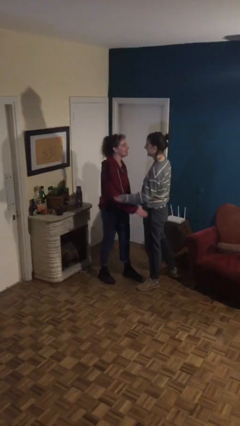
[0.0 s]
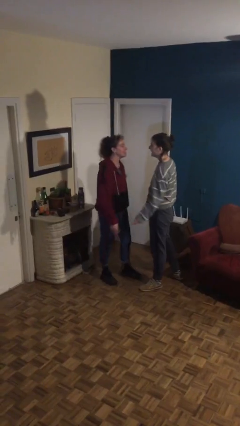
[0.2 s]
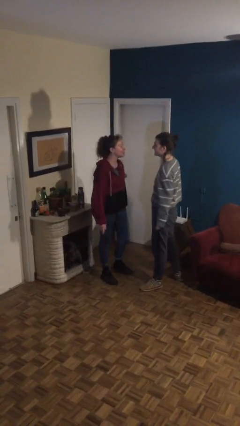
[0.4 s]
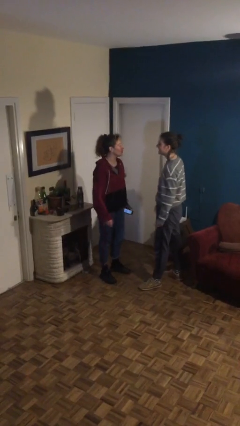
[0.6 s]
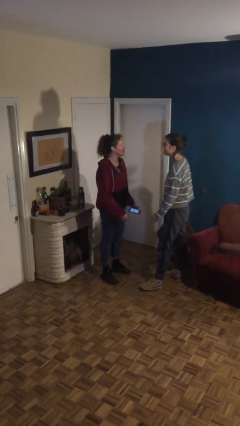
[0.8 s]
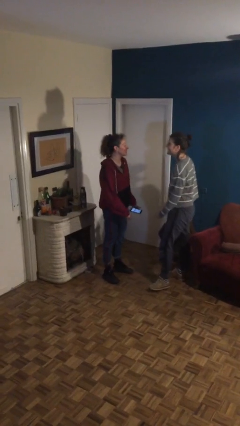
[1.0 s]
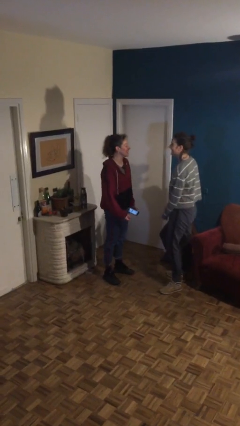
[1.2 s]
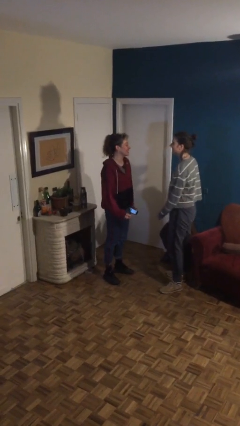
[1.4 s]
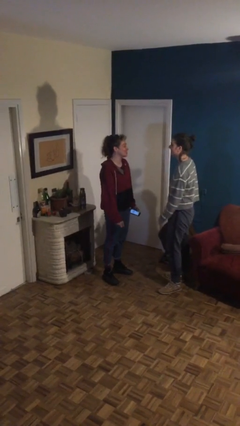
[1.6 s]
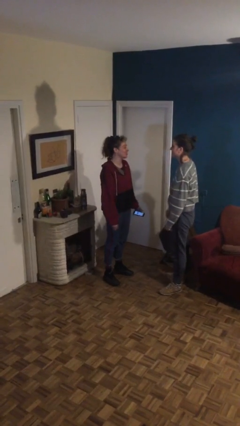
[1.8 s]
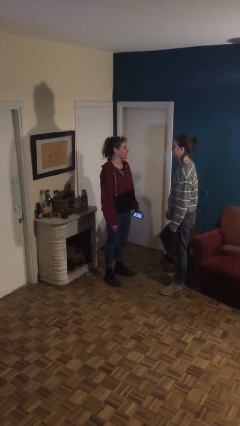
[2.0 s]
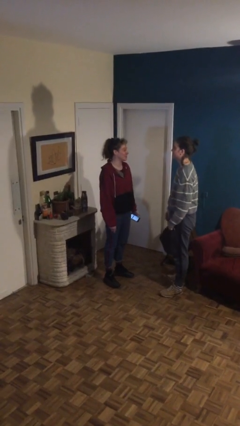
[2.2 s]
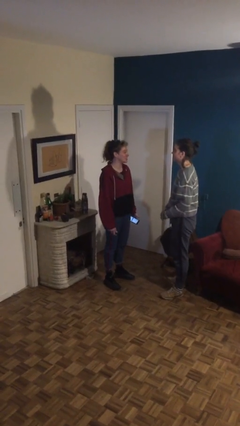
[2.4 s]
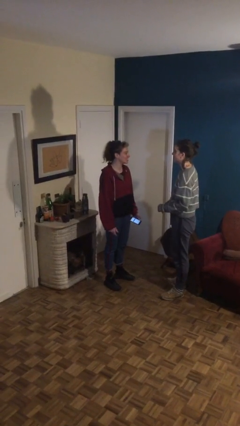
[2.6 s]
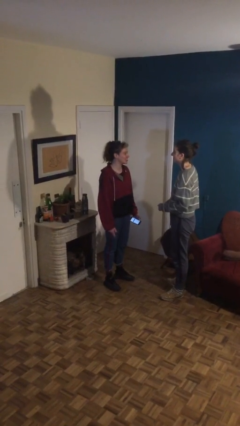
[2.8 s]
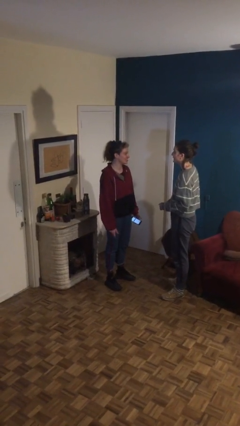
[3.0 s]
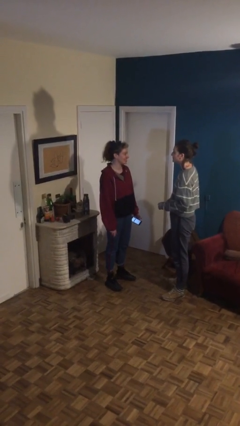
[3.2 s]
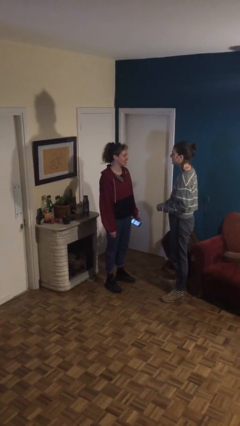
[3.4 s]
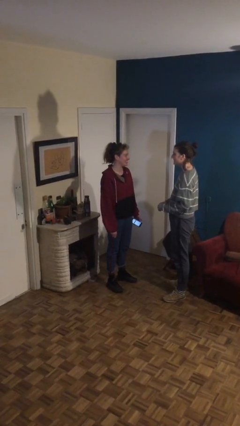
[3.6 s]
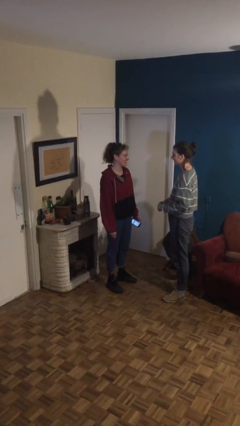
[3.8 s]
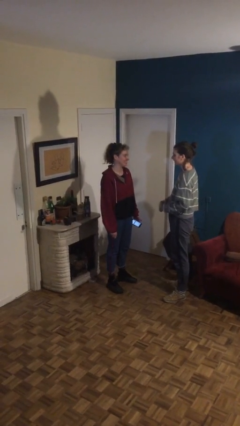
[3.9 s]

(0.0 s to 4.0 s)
person talks to person

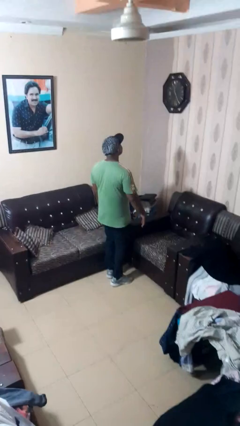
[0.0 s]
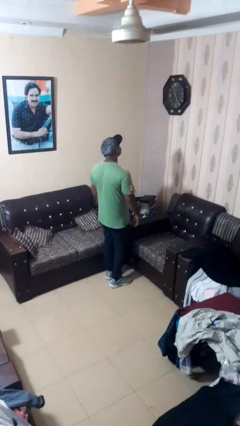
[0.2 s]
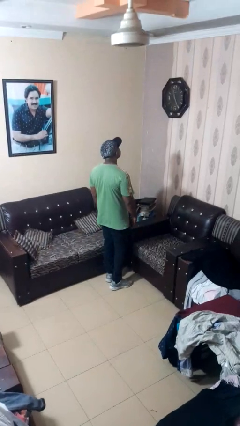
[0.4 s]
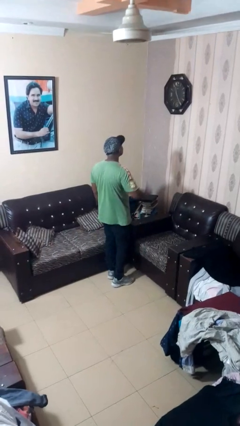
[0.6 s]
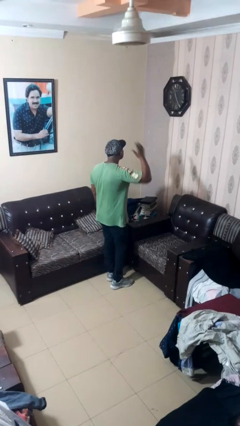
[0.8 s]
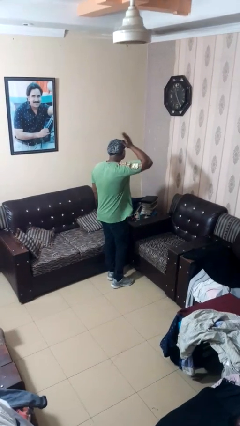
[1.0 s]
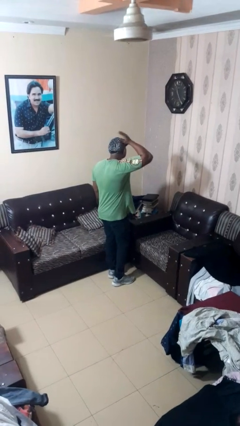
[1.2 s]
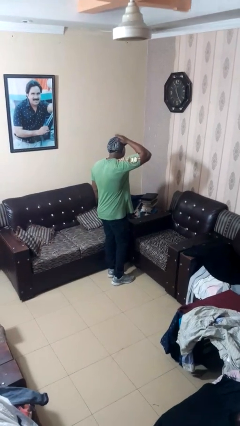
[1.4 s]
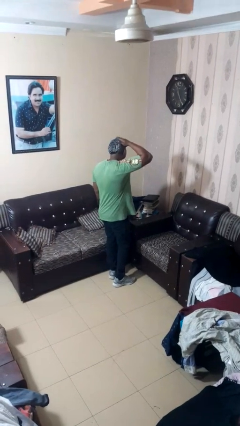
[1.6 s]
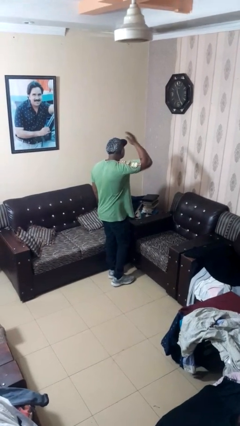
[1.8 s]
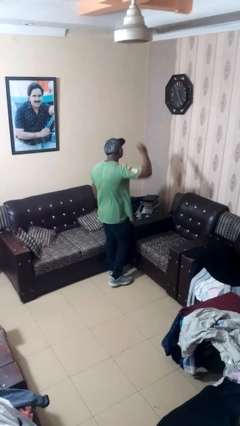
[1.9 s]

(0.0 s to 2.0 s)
person pats head

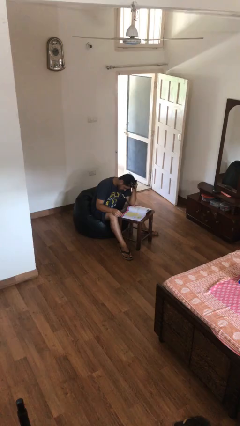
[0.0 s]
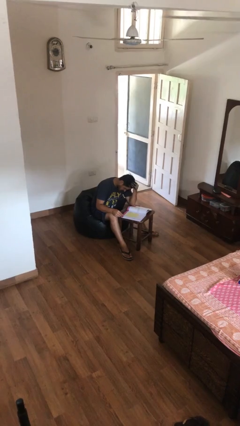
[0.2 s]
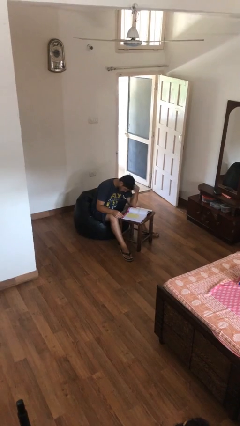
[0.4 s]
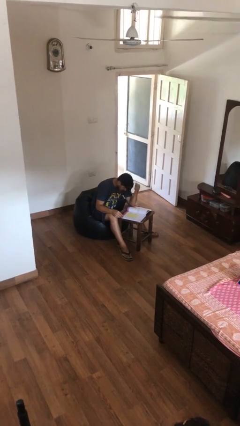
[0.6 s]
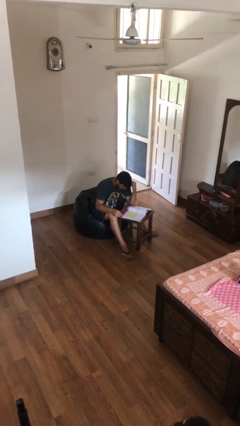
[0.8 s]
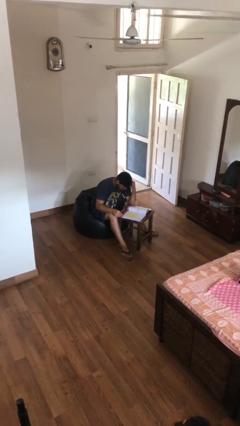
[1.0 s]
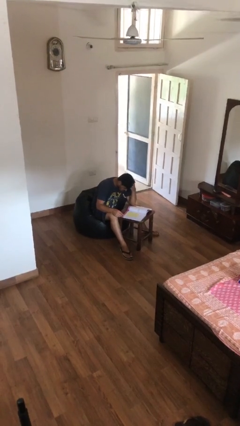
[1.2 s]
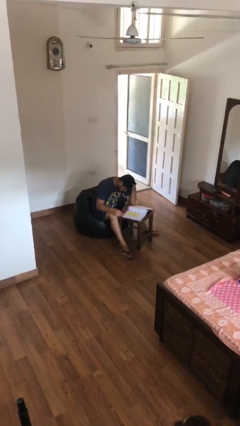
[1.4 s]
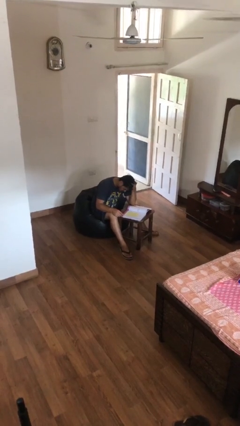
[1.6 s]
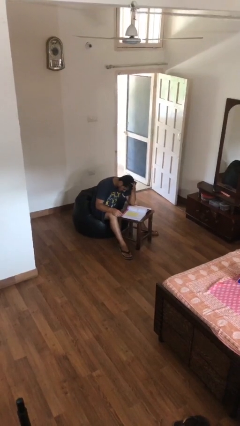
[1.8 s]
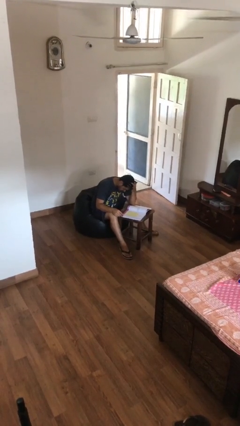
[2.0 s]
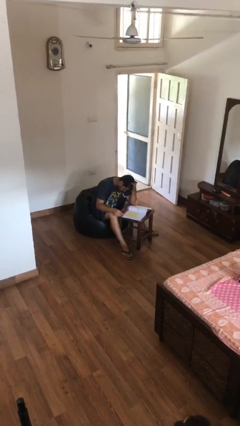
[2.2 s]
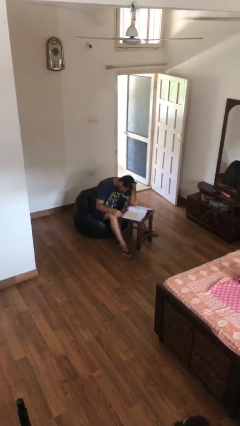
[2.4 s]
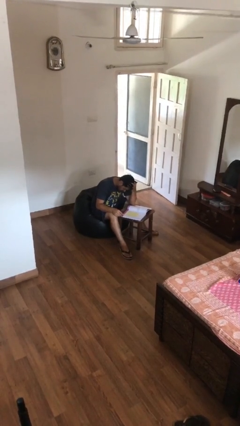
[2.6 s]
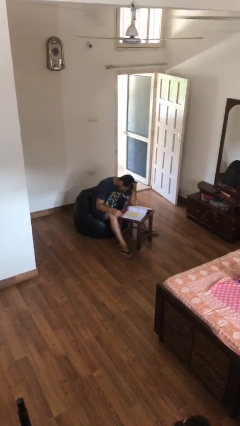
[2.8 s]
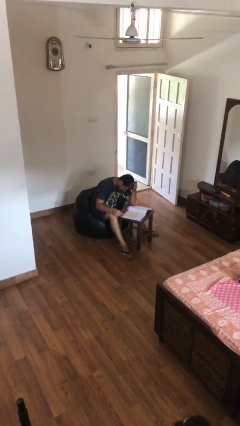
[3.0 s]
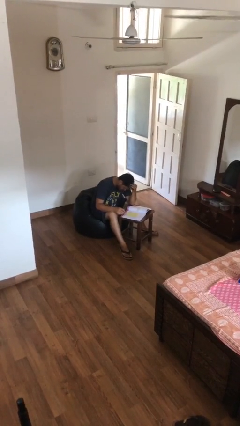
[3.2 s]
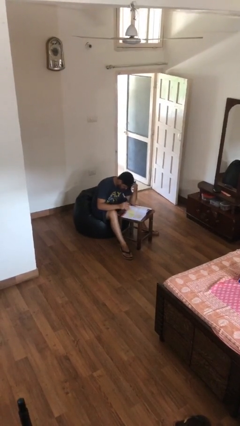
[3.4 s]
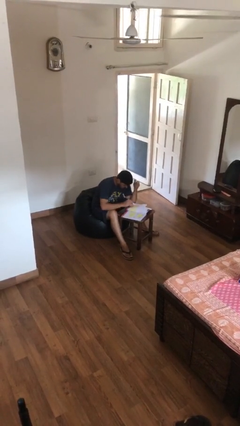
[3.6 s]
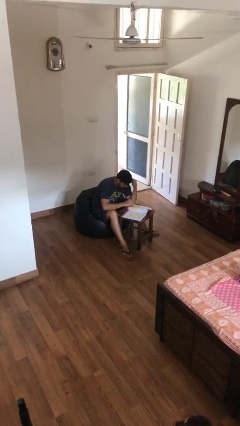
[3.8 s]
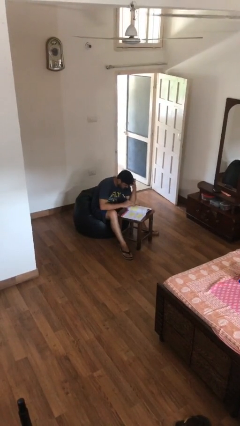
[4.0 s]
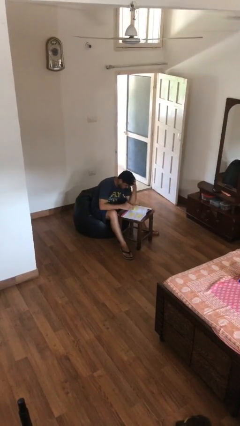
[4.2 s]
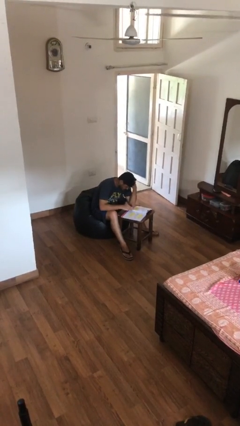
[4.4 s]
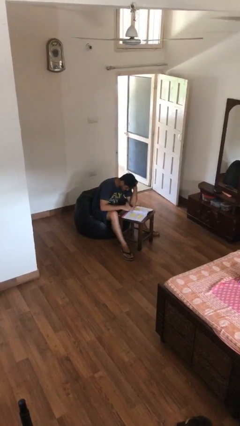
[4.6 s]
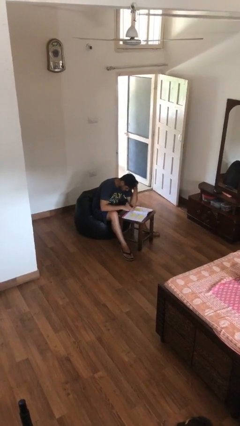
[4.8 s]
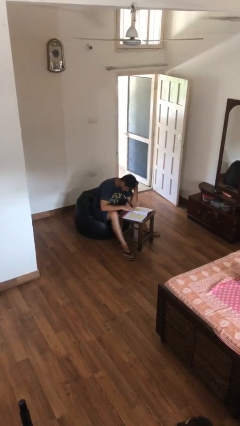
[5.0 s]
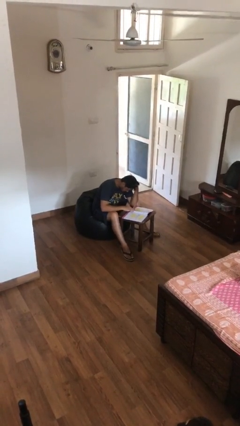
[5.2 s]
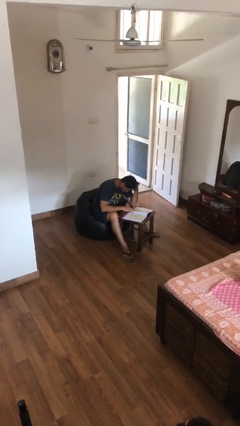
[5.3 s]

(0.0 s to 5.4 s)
person reads document

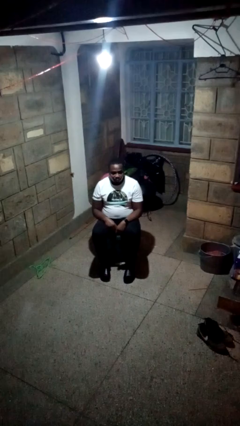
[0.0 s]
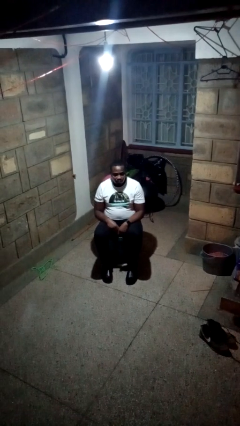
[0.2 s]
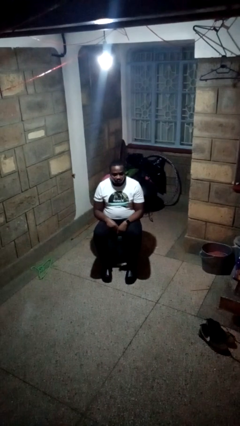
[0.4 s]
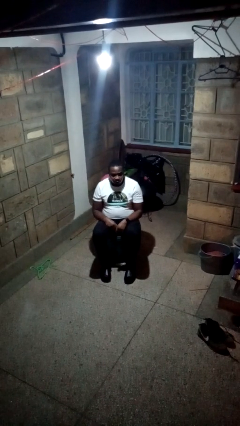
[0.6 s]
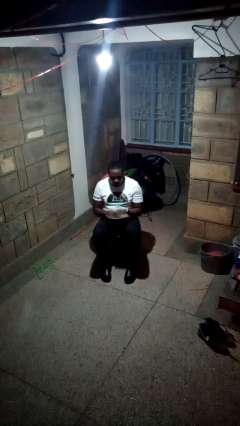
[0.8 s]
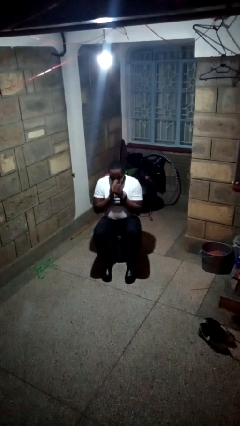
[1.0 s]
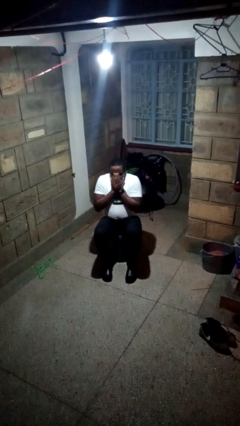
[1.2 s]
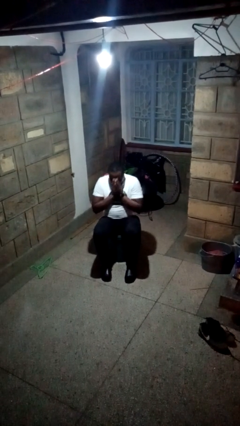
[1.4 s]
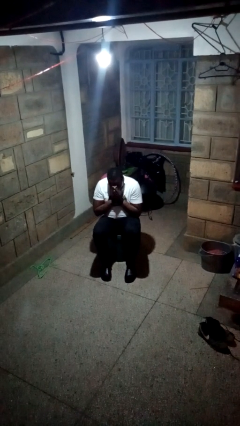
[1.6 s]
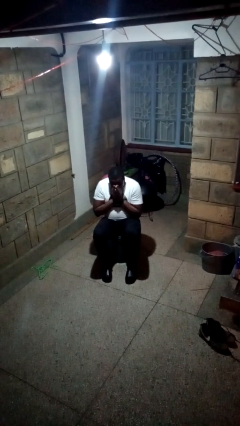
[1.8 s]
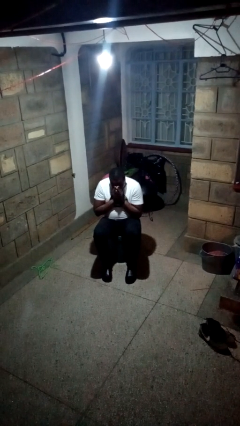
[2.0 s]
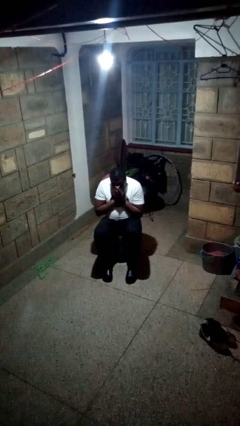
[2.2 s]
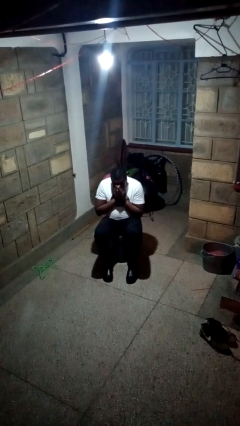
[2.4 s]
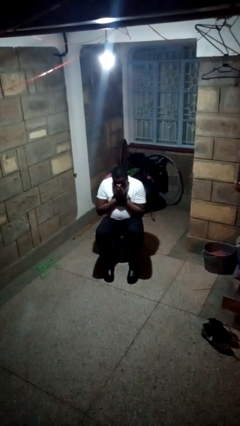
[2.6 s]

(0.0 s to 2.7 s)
person sneezes into hand

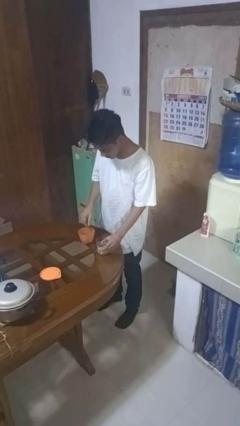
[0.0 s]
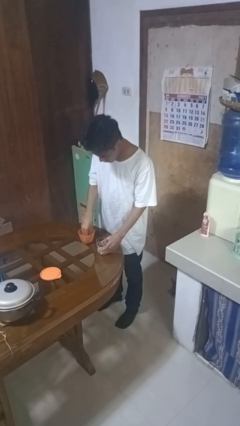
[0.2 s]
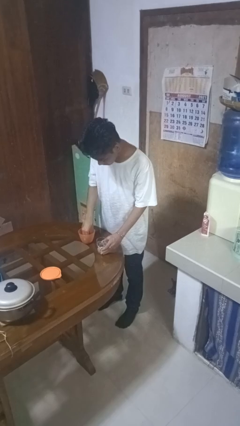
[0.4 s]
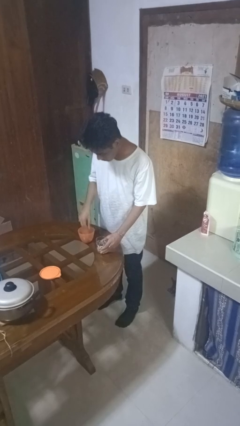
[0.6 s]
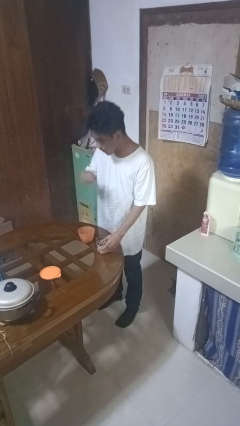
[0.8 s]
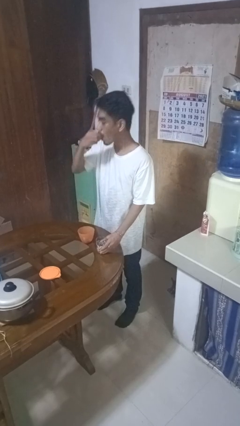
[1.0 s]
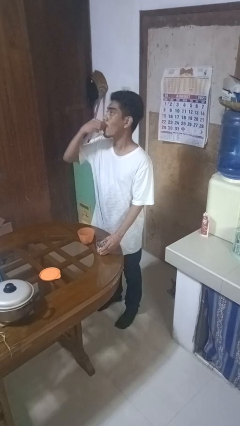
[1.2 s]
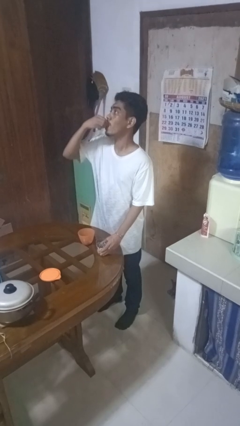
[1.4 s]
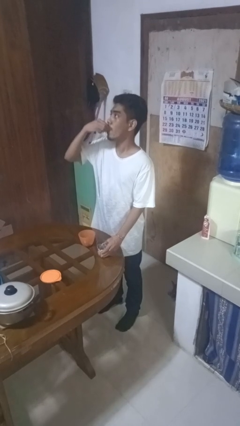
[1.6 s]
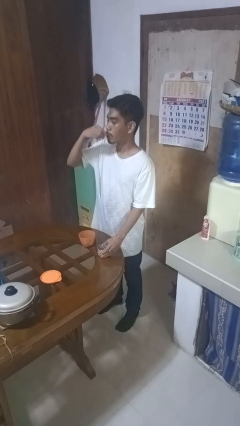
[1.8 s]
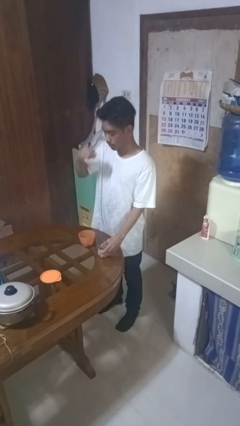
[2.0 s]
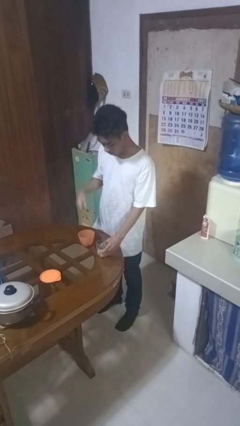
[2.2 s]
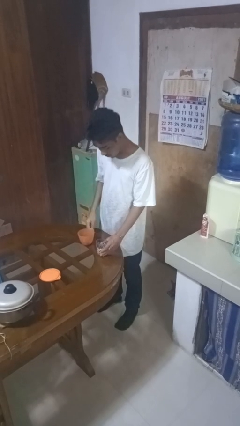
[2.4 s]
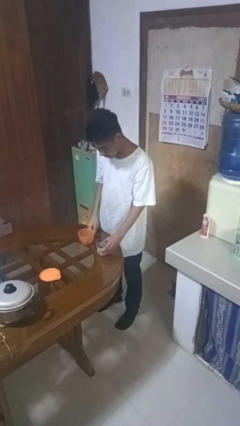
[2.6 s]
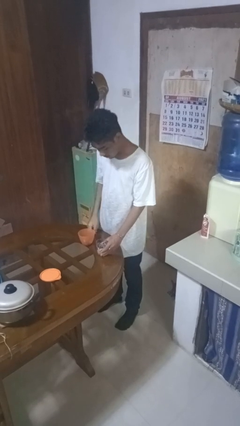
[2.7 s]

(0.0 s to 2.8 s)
person takes medicine pills

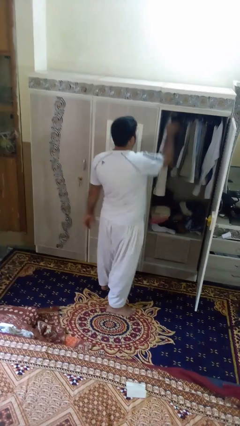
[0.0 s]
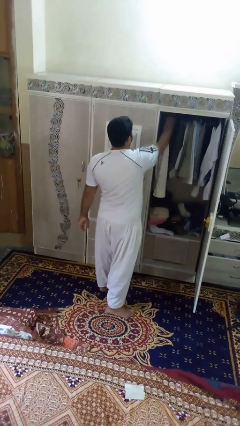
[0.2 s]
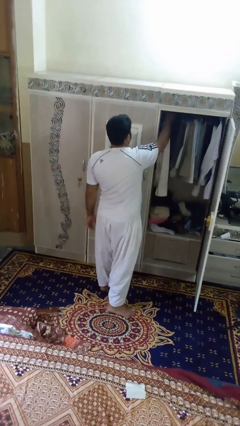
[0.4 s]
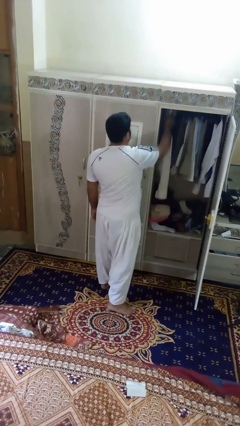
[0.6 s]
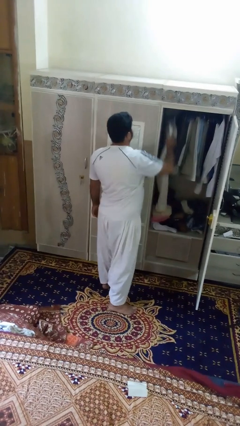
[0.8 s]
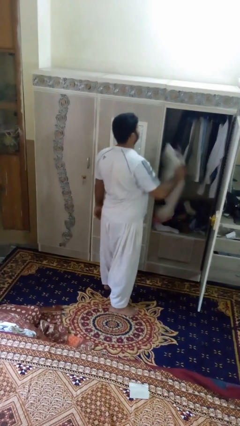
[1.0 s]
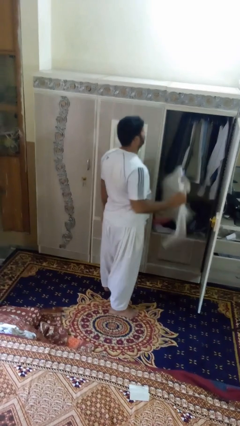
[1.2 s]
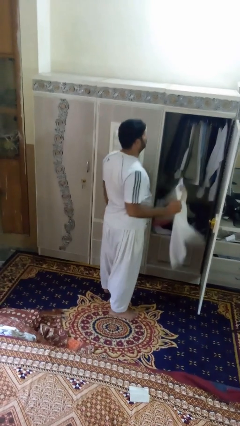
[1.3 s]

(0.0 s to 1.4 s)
person takes clothes from closet
